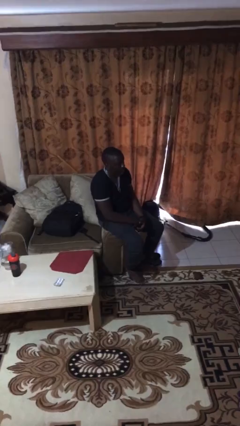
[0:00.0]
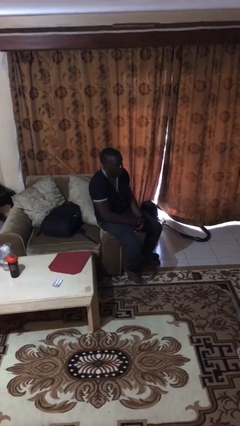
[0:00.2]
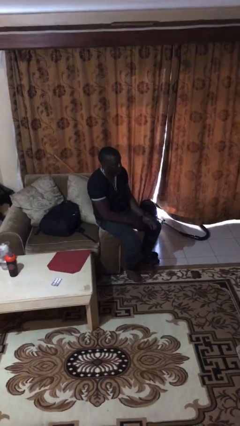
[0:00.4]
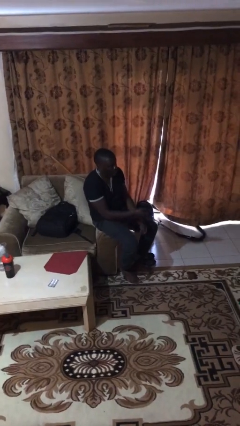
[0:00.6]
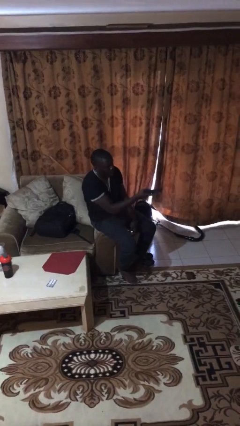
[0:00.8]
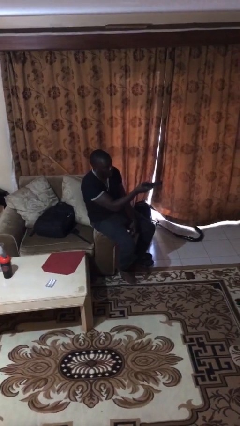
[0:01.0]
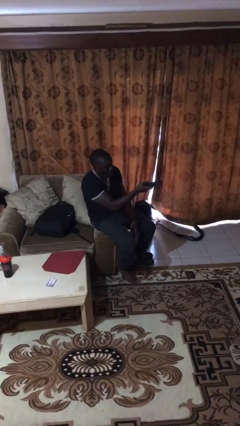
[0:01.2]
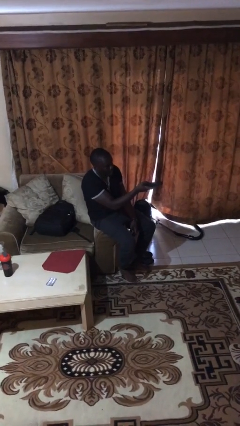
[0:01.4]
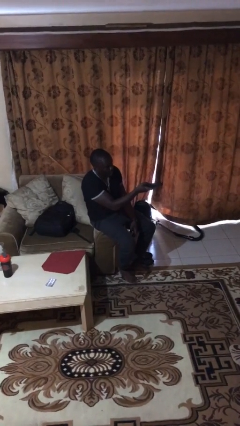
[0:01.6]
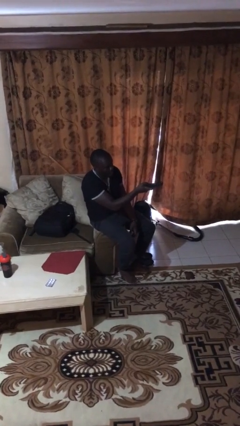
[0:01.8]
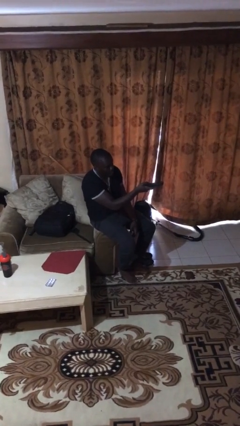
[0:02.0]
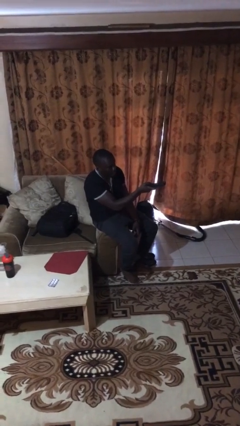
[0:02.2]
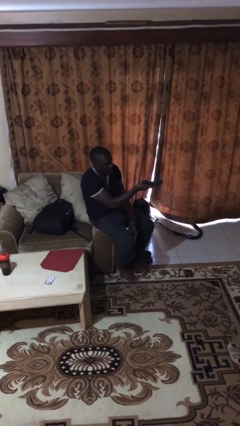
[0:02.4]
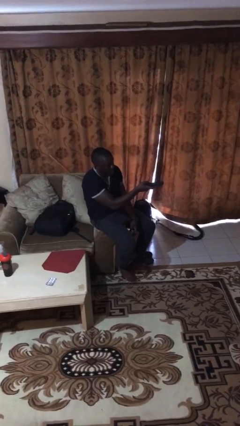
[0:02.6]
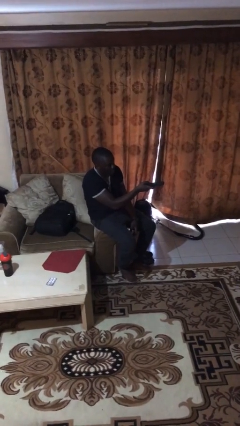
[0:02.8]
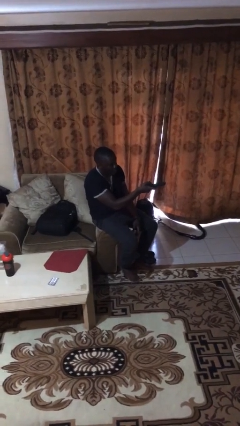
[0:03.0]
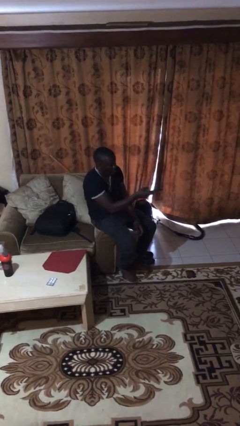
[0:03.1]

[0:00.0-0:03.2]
person uses television remote

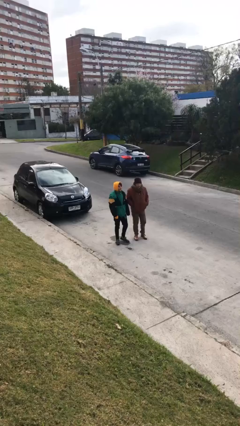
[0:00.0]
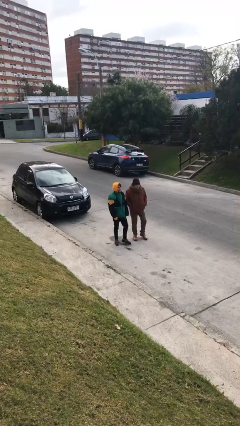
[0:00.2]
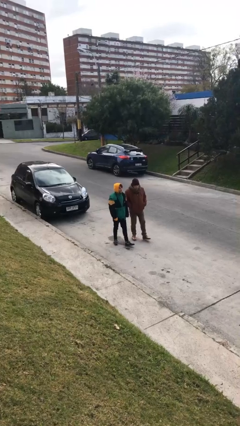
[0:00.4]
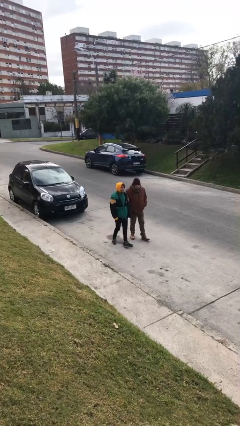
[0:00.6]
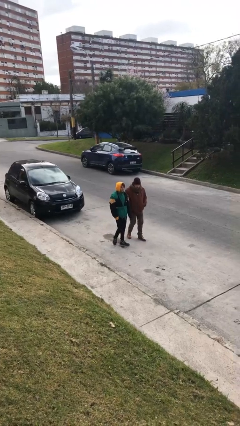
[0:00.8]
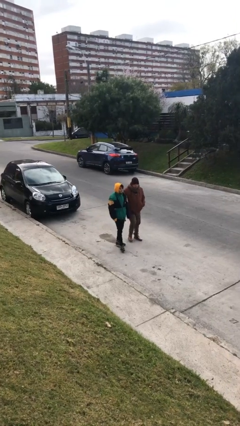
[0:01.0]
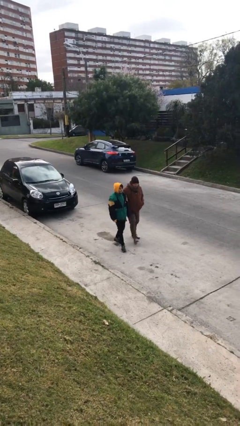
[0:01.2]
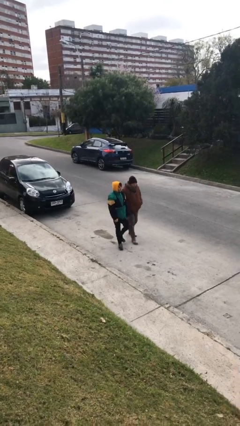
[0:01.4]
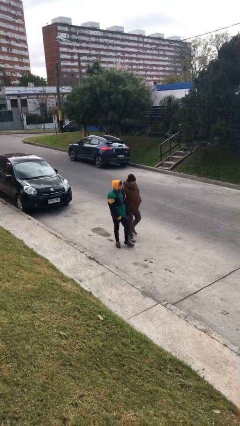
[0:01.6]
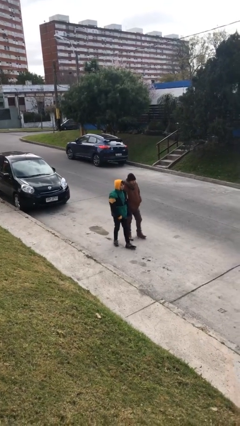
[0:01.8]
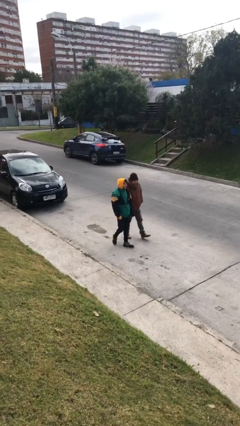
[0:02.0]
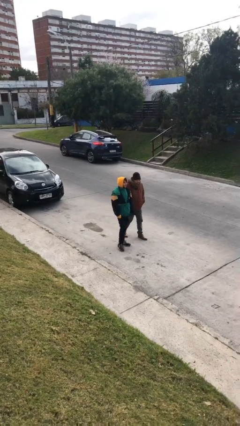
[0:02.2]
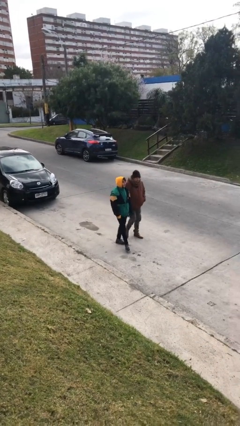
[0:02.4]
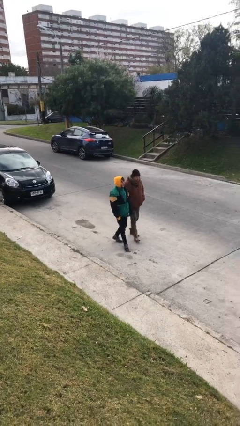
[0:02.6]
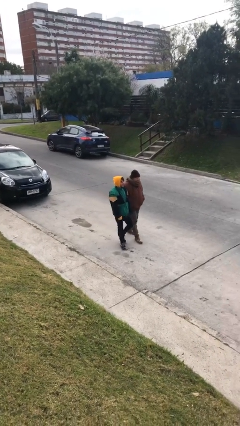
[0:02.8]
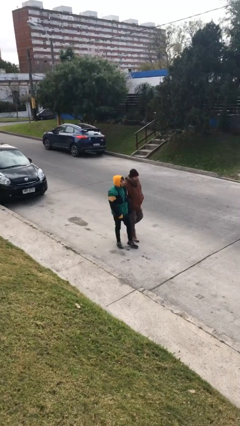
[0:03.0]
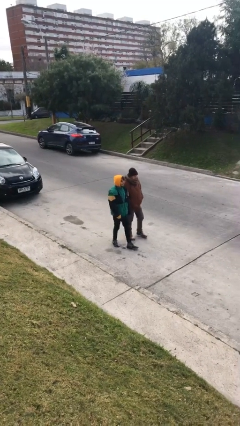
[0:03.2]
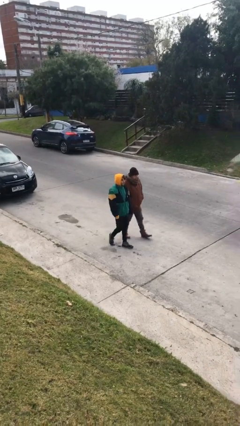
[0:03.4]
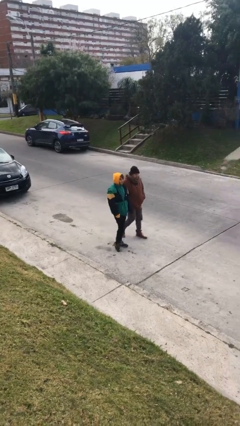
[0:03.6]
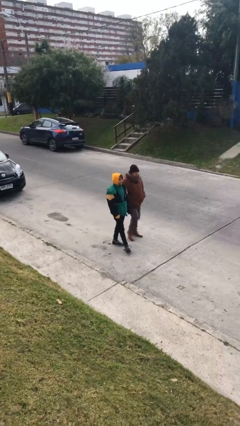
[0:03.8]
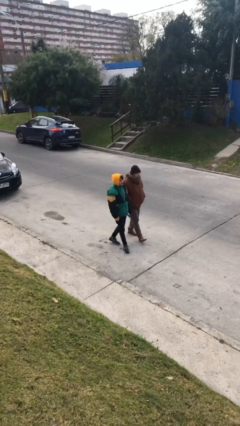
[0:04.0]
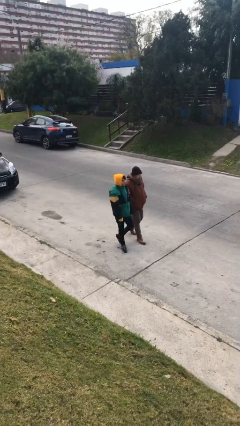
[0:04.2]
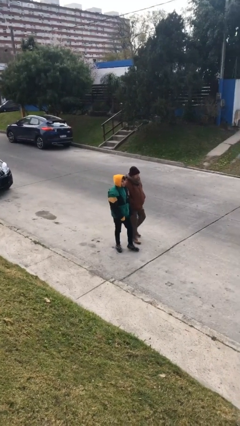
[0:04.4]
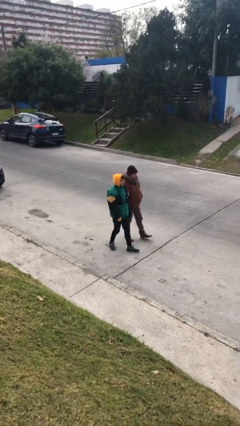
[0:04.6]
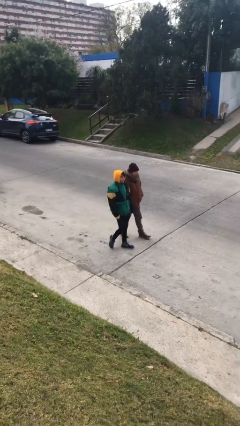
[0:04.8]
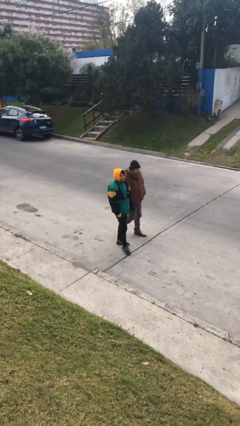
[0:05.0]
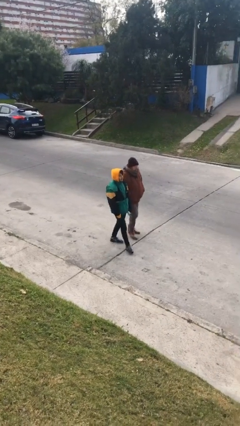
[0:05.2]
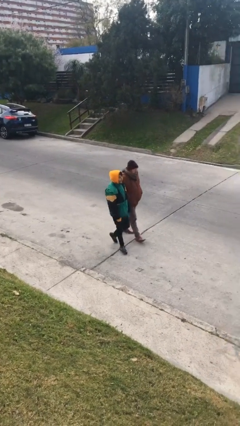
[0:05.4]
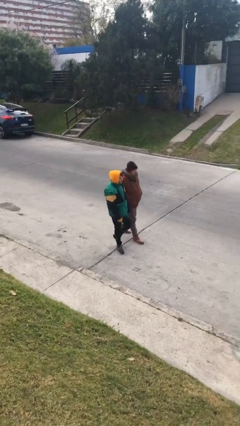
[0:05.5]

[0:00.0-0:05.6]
person talks to person

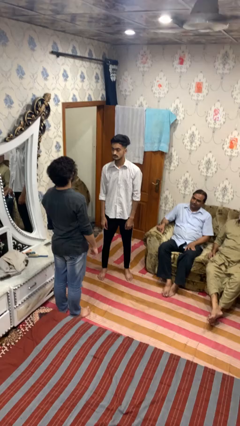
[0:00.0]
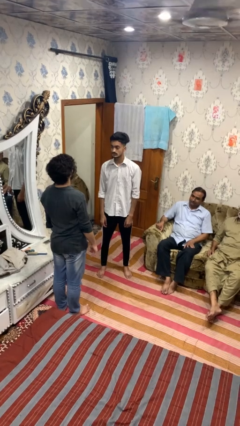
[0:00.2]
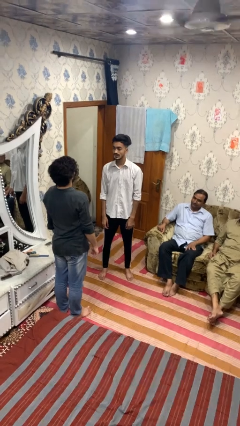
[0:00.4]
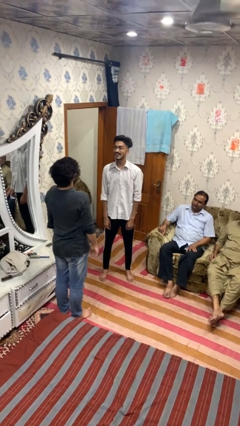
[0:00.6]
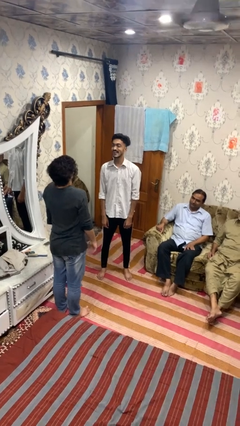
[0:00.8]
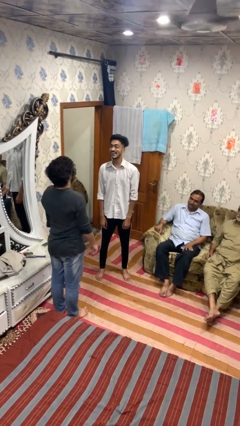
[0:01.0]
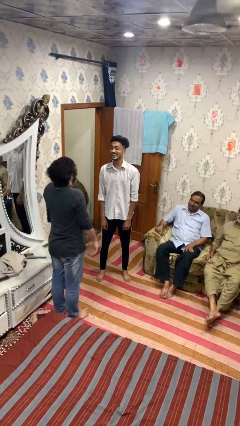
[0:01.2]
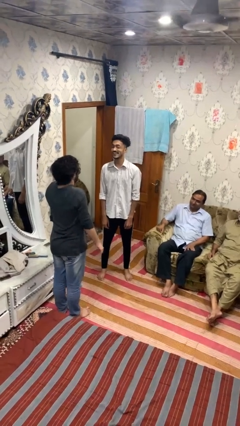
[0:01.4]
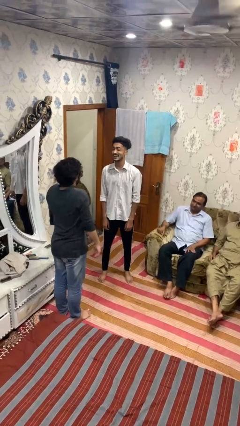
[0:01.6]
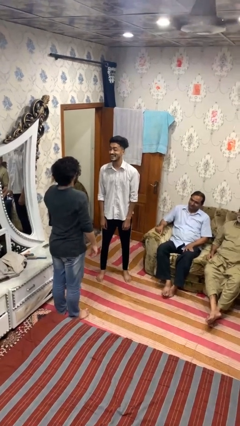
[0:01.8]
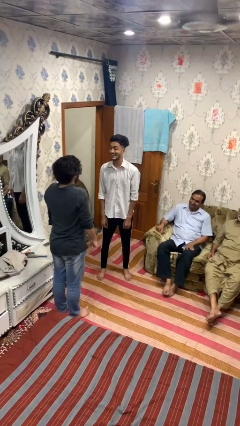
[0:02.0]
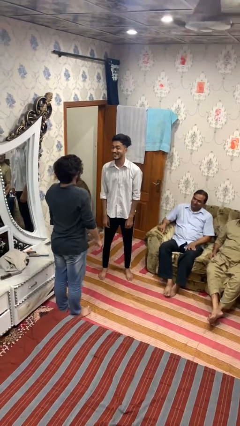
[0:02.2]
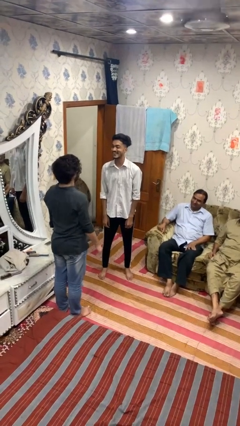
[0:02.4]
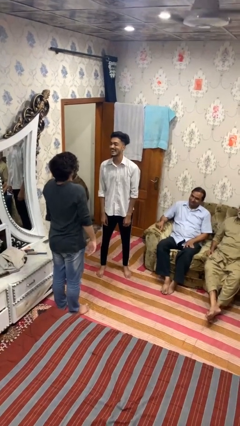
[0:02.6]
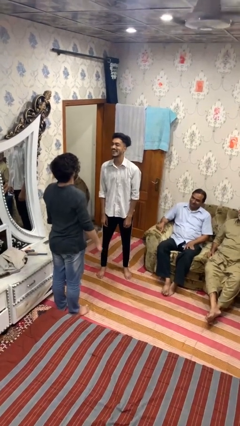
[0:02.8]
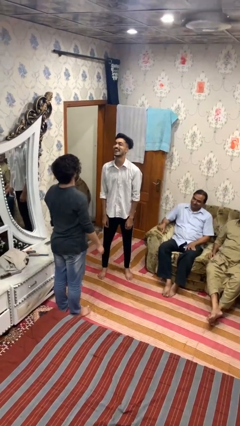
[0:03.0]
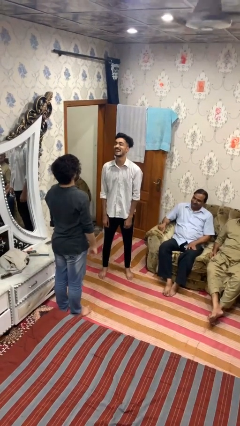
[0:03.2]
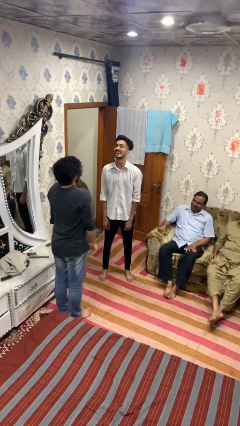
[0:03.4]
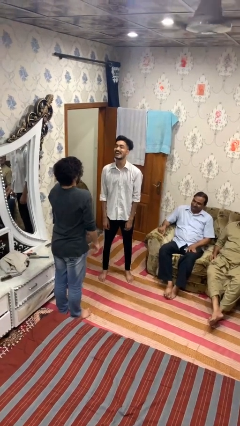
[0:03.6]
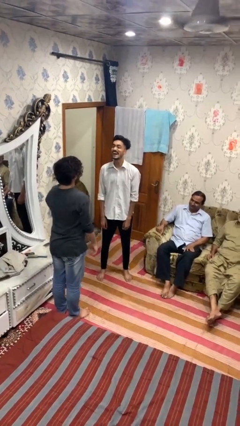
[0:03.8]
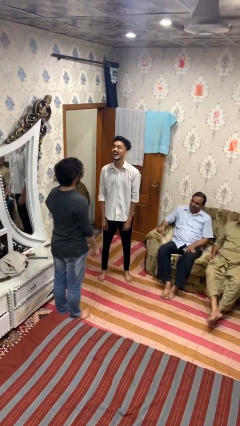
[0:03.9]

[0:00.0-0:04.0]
person laughs with person

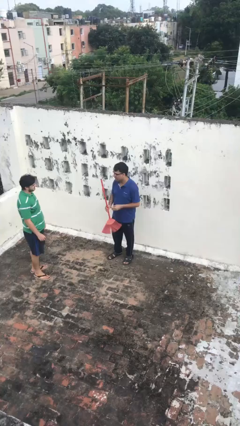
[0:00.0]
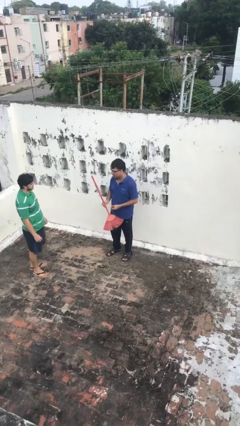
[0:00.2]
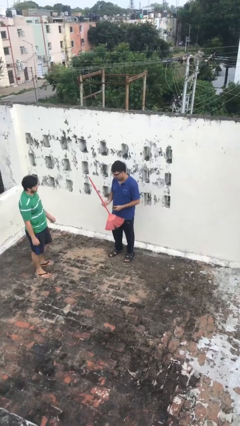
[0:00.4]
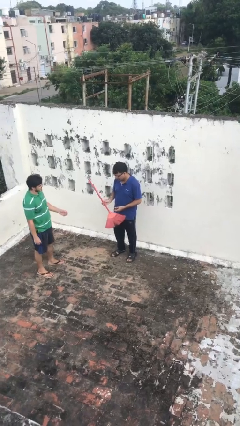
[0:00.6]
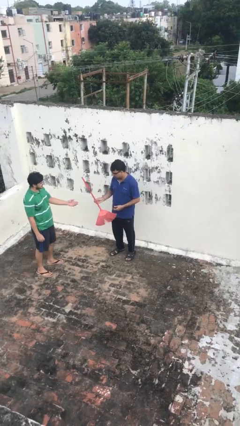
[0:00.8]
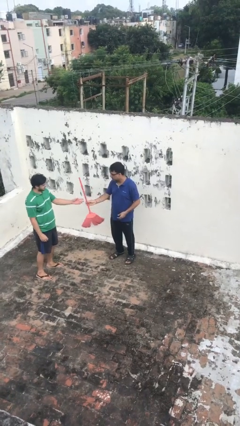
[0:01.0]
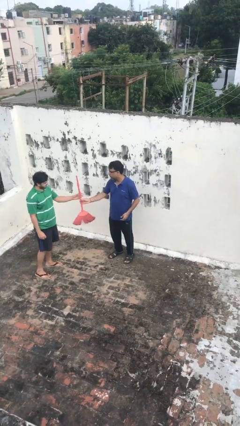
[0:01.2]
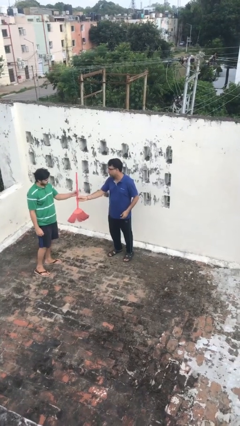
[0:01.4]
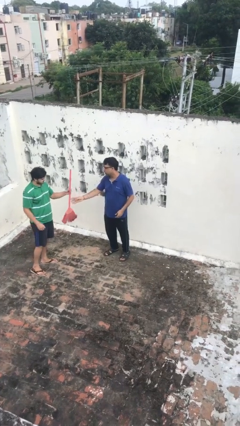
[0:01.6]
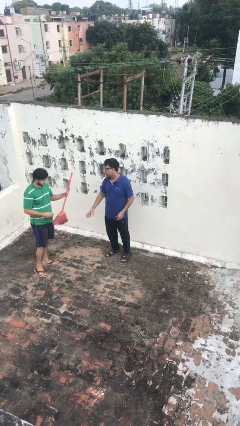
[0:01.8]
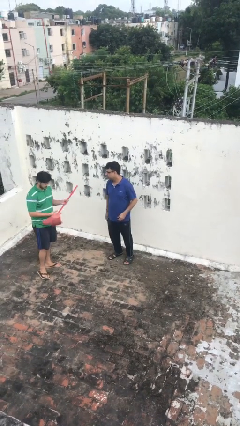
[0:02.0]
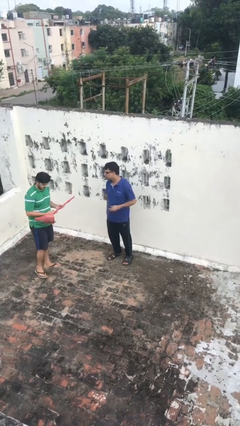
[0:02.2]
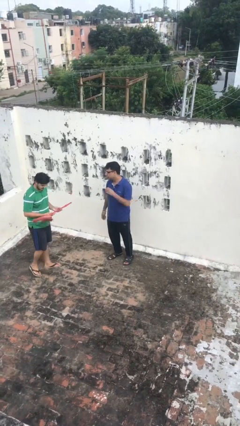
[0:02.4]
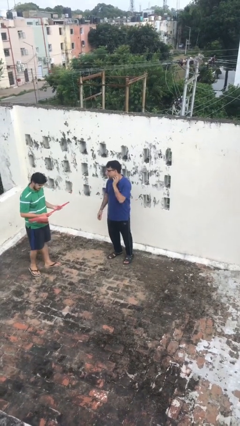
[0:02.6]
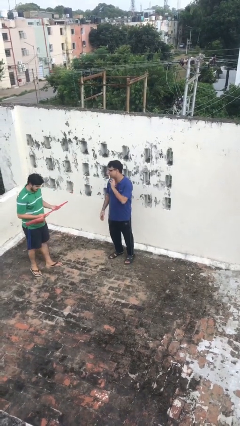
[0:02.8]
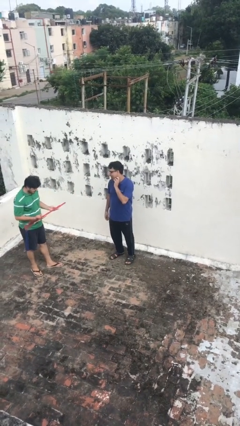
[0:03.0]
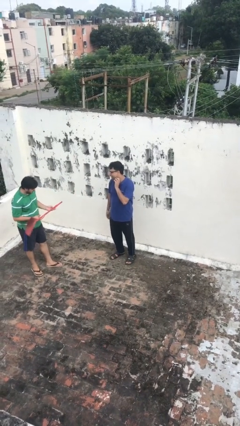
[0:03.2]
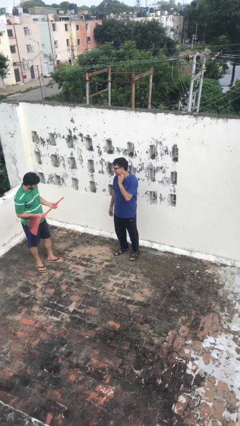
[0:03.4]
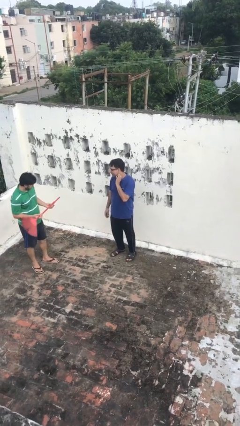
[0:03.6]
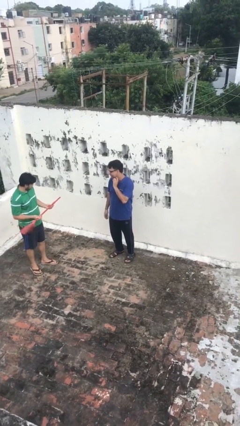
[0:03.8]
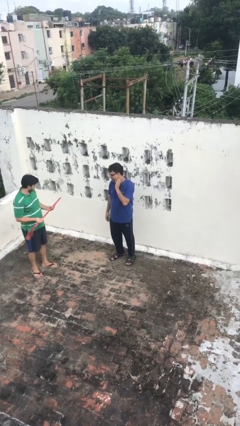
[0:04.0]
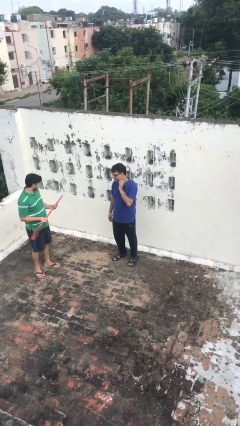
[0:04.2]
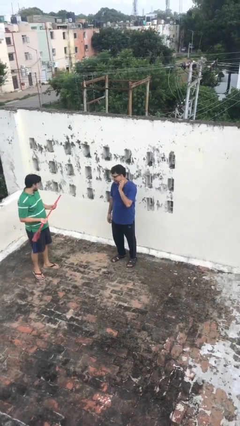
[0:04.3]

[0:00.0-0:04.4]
person transfers object to person
